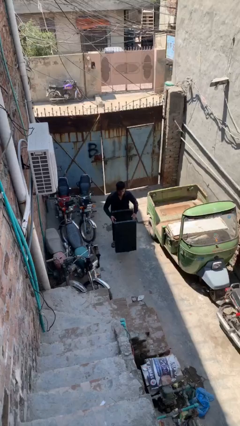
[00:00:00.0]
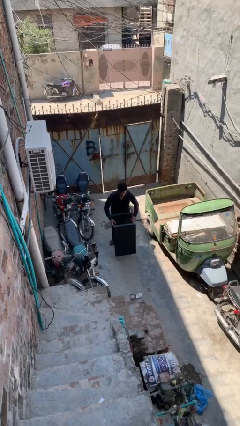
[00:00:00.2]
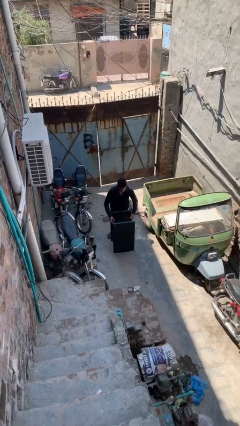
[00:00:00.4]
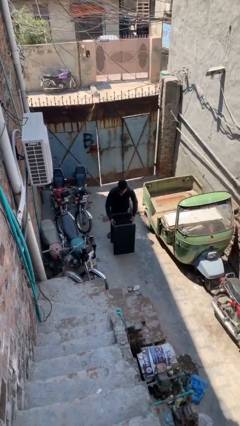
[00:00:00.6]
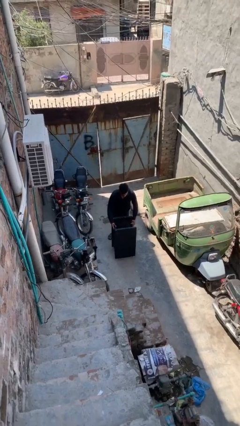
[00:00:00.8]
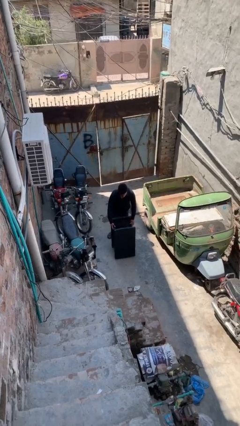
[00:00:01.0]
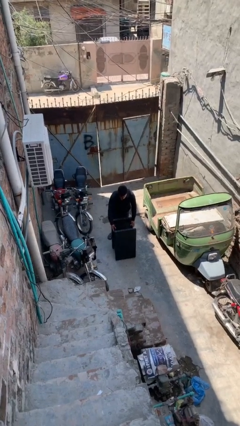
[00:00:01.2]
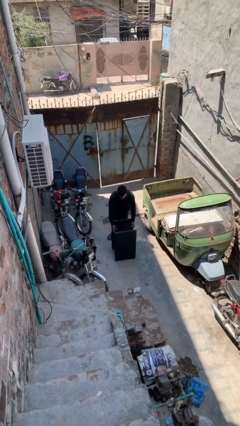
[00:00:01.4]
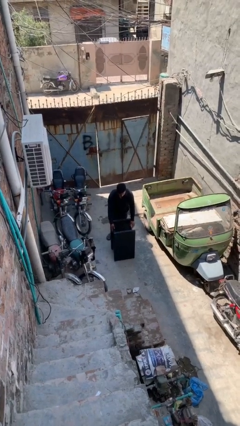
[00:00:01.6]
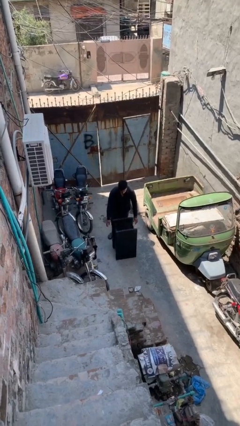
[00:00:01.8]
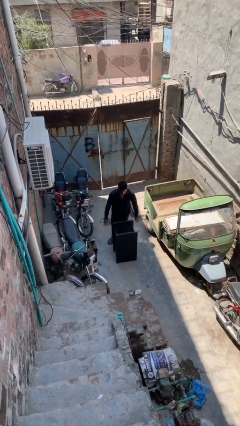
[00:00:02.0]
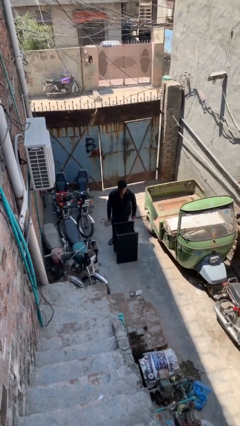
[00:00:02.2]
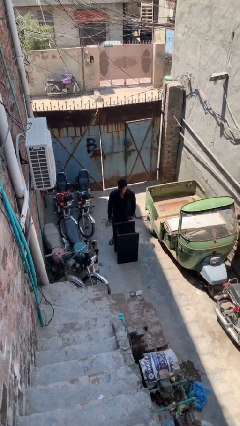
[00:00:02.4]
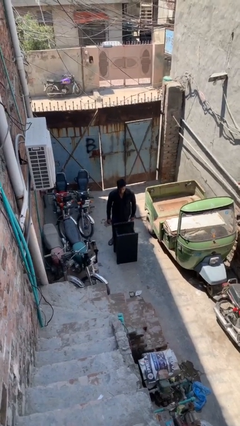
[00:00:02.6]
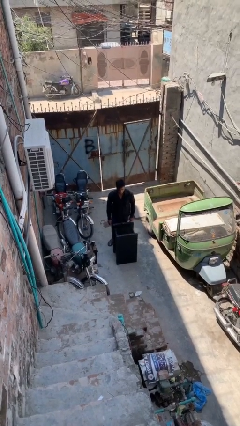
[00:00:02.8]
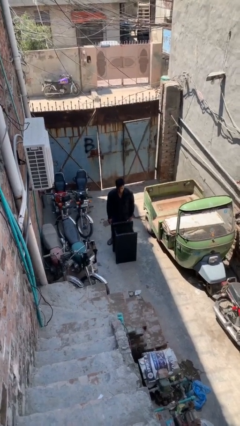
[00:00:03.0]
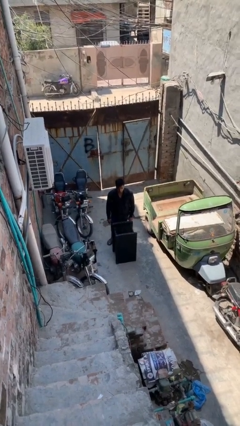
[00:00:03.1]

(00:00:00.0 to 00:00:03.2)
person puts down object on floor

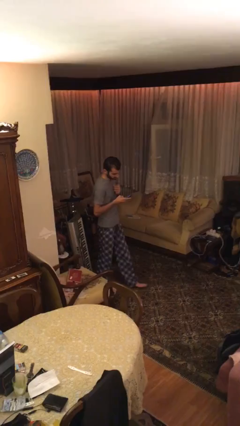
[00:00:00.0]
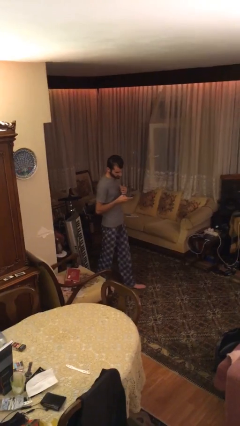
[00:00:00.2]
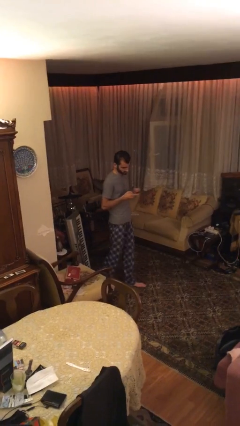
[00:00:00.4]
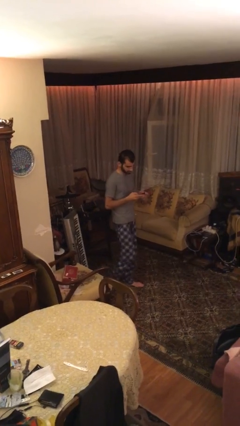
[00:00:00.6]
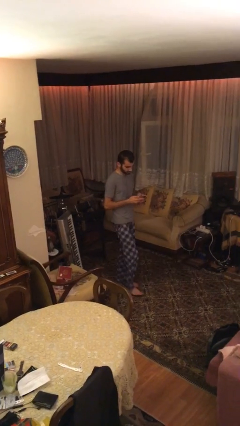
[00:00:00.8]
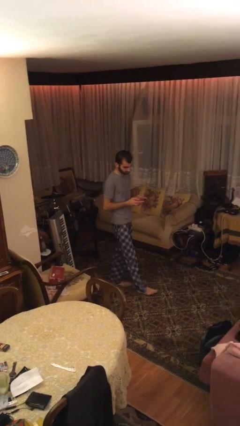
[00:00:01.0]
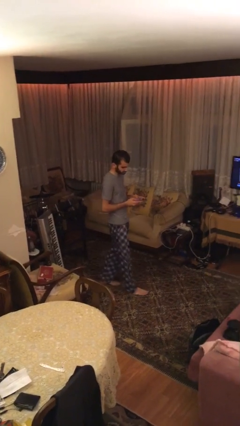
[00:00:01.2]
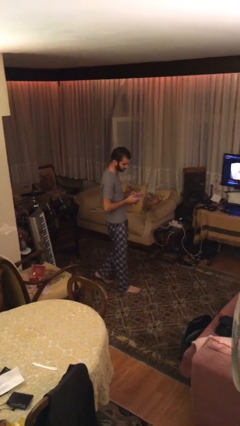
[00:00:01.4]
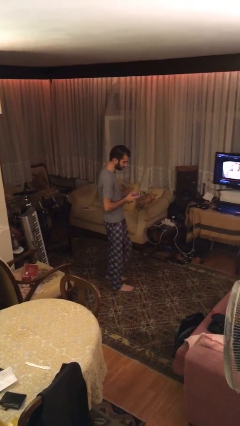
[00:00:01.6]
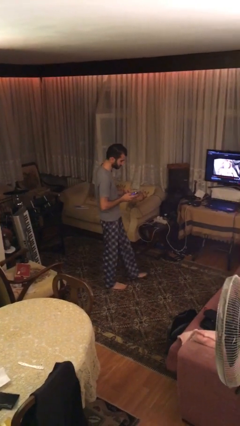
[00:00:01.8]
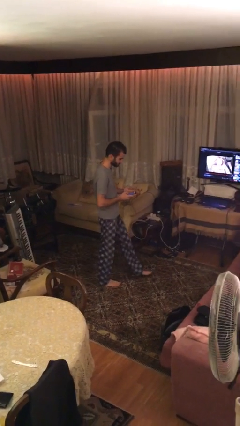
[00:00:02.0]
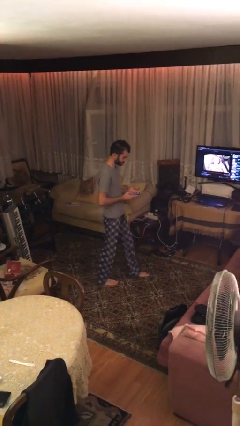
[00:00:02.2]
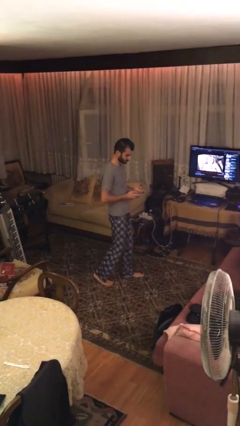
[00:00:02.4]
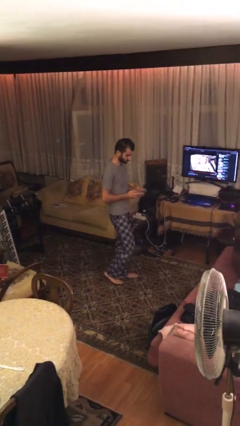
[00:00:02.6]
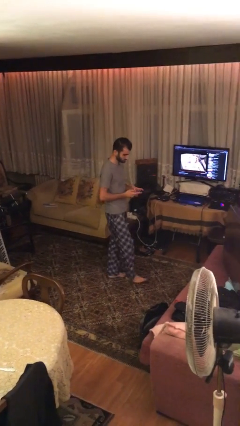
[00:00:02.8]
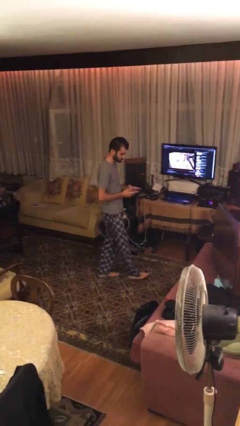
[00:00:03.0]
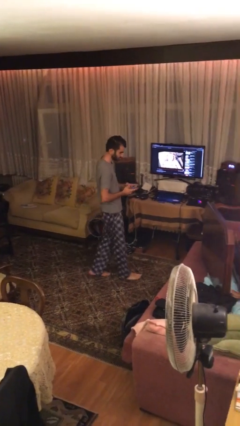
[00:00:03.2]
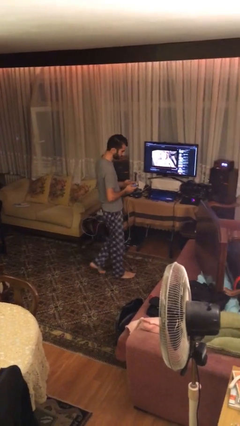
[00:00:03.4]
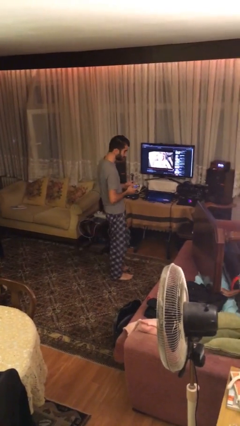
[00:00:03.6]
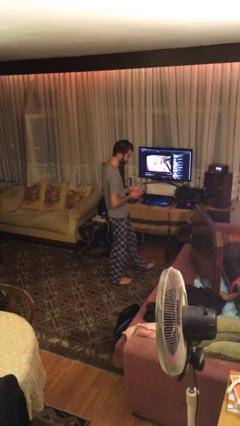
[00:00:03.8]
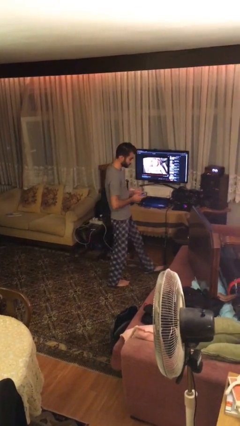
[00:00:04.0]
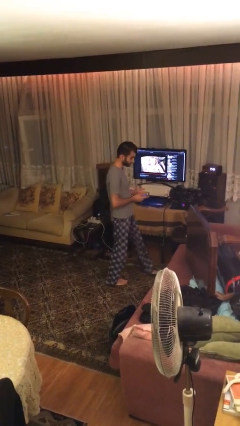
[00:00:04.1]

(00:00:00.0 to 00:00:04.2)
person texts on phone

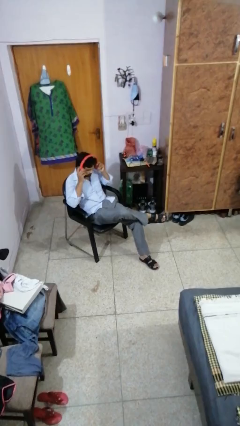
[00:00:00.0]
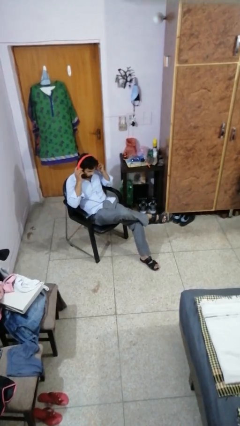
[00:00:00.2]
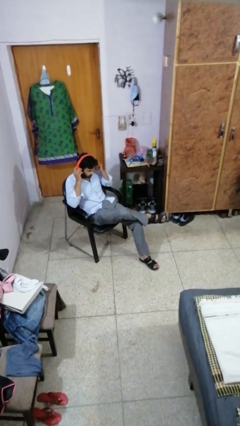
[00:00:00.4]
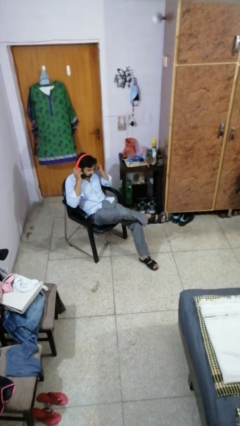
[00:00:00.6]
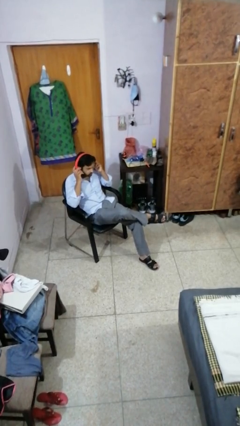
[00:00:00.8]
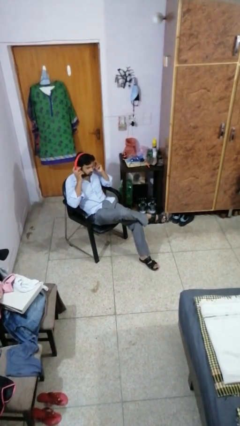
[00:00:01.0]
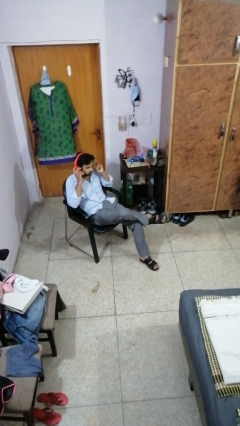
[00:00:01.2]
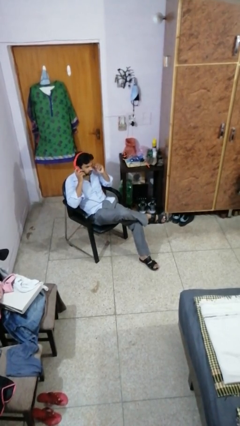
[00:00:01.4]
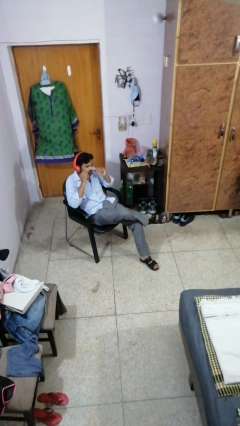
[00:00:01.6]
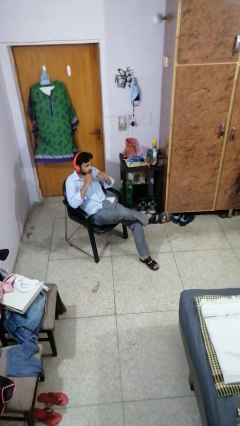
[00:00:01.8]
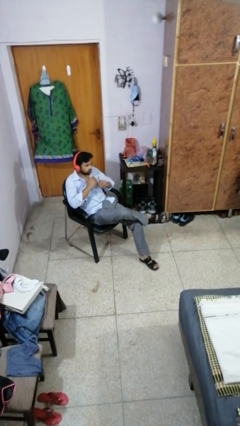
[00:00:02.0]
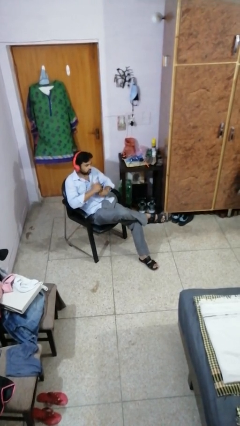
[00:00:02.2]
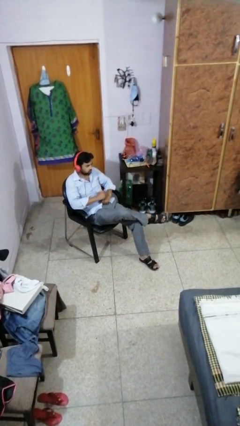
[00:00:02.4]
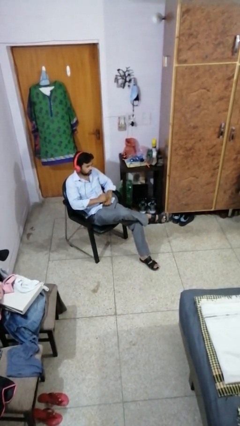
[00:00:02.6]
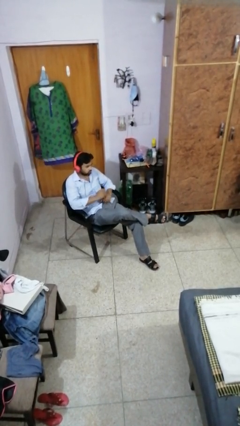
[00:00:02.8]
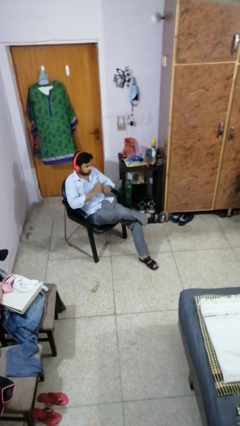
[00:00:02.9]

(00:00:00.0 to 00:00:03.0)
person puts on headphones

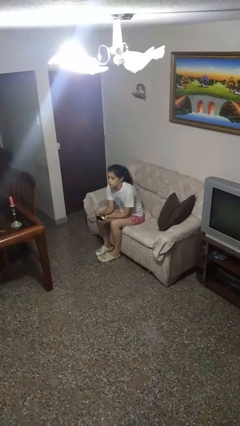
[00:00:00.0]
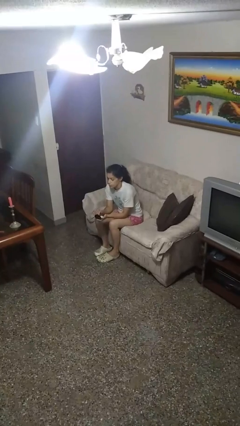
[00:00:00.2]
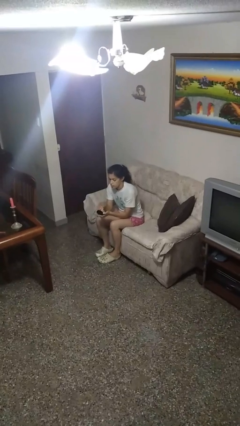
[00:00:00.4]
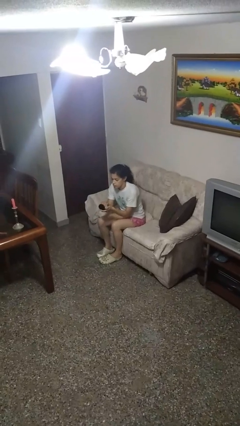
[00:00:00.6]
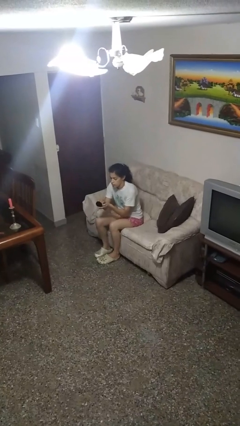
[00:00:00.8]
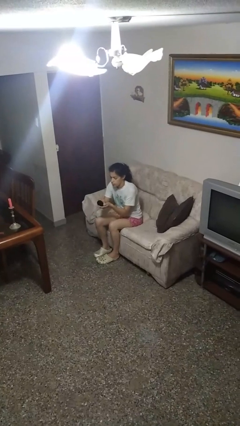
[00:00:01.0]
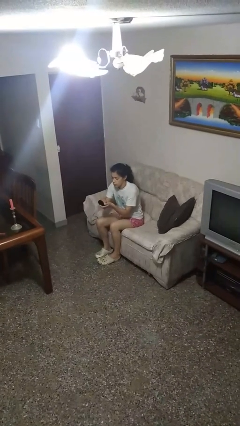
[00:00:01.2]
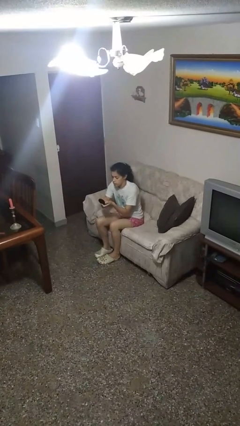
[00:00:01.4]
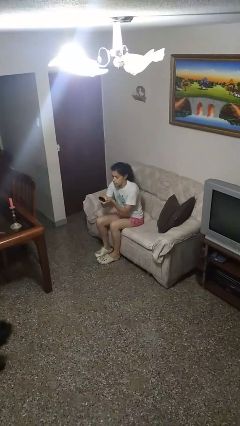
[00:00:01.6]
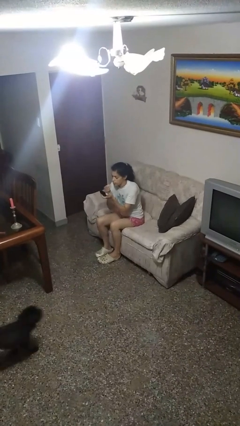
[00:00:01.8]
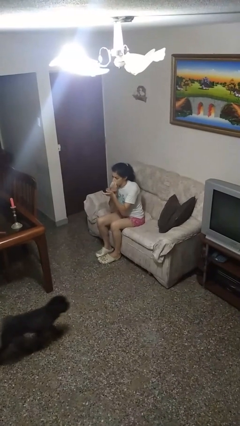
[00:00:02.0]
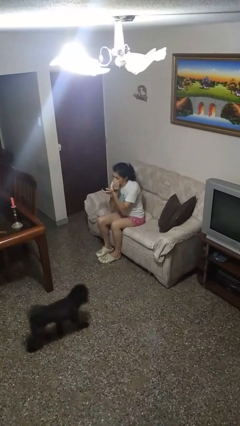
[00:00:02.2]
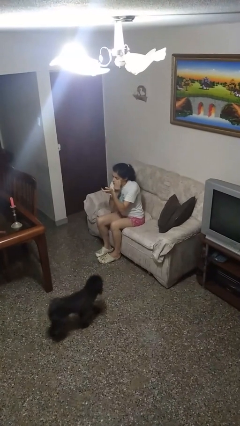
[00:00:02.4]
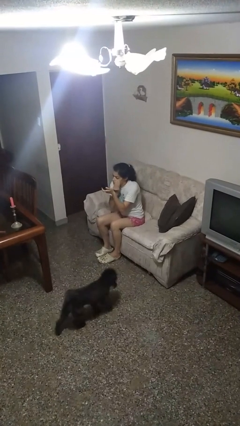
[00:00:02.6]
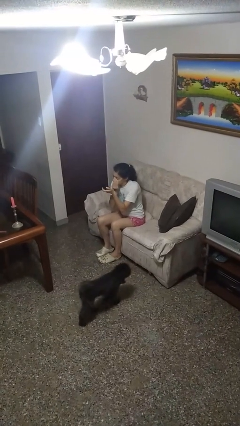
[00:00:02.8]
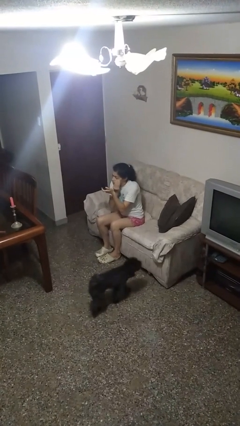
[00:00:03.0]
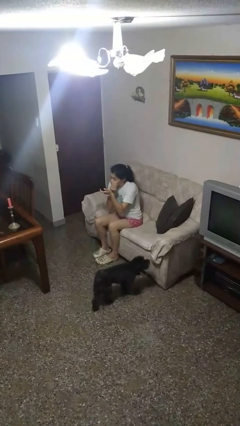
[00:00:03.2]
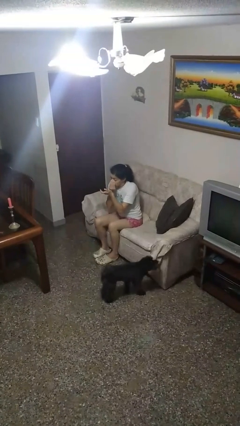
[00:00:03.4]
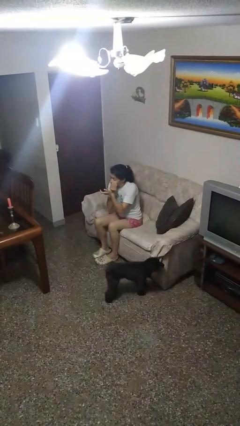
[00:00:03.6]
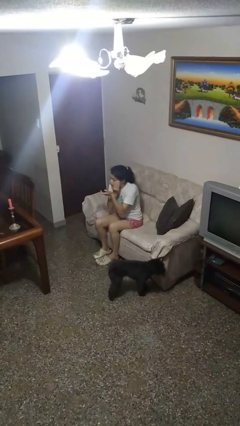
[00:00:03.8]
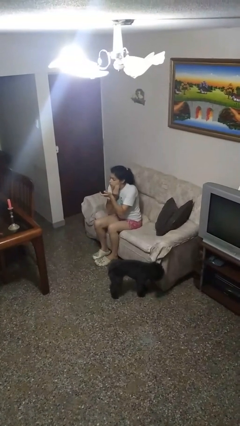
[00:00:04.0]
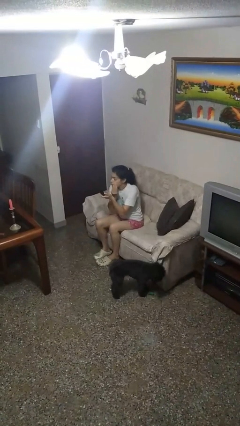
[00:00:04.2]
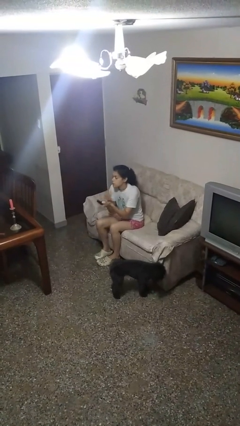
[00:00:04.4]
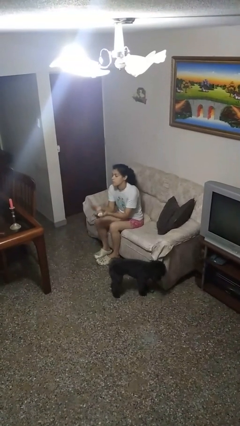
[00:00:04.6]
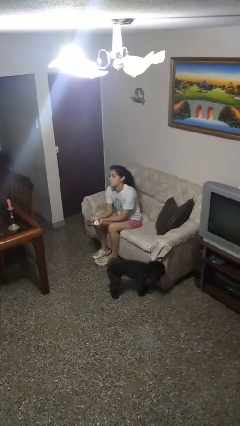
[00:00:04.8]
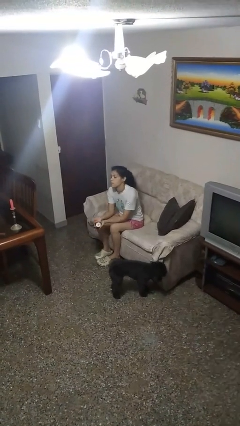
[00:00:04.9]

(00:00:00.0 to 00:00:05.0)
person applies foundation makeup

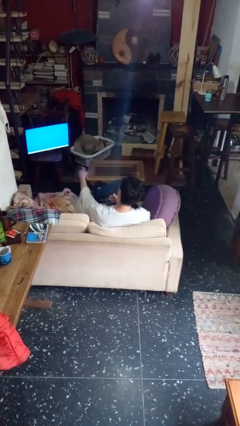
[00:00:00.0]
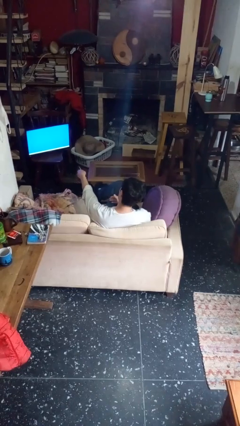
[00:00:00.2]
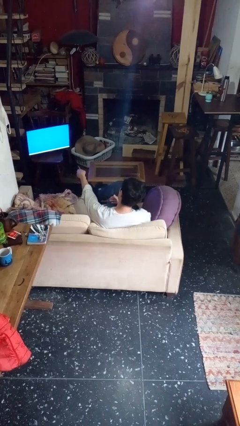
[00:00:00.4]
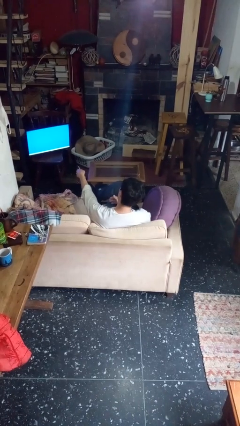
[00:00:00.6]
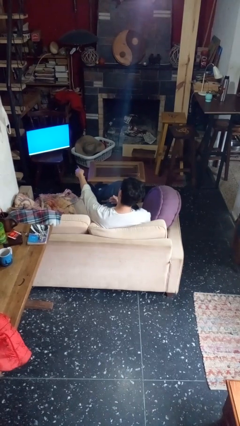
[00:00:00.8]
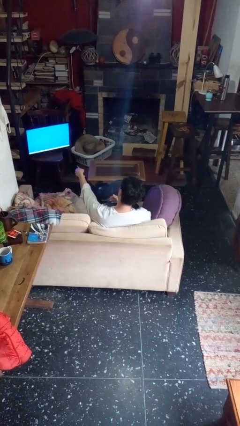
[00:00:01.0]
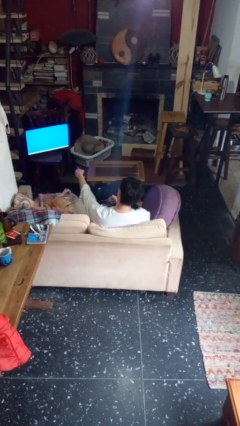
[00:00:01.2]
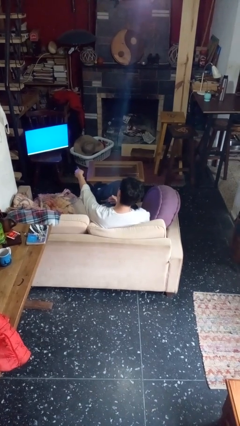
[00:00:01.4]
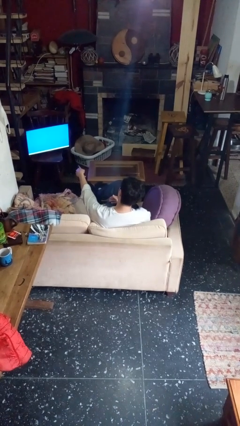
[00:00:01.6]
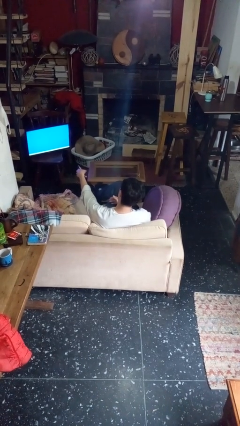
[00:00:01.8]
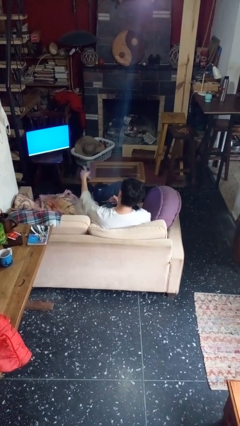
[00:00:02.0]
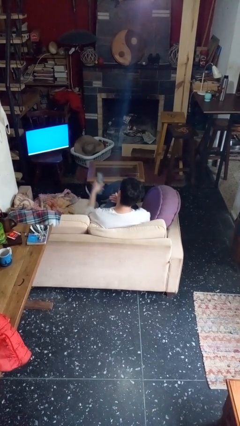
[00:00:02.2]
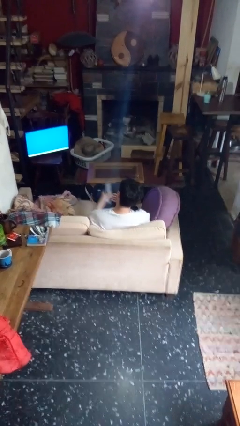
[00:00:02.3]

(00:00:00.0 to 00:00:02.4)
person uses television remote
